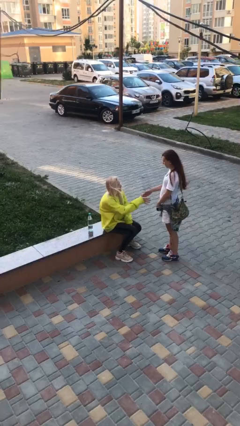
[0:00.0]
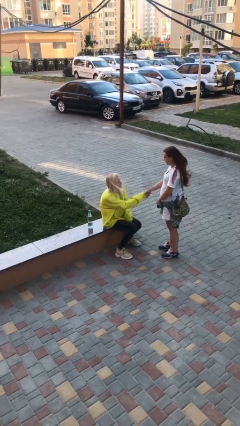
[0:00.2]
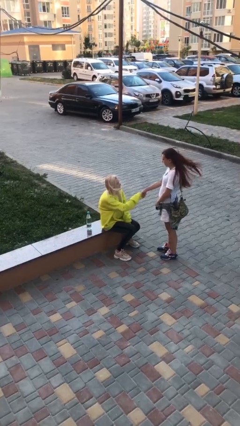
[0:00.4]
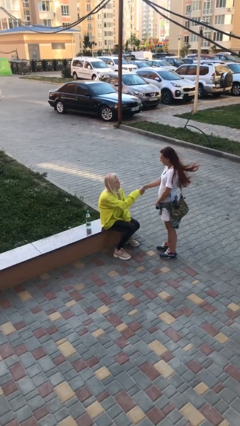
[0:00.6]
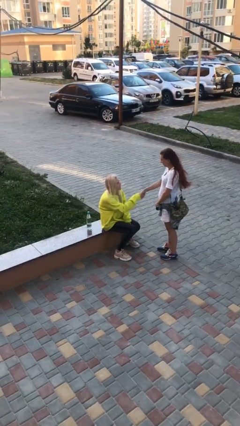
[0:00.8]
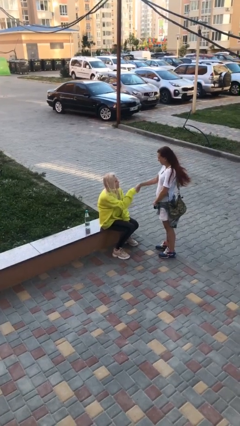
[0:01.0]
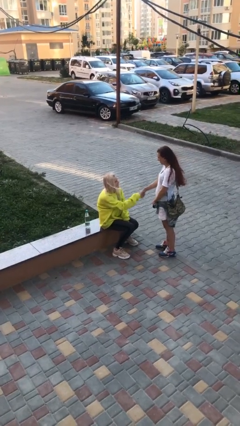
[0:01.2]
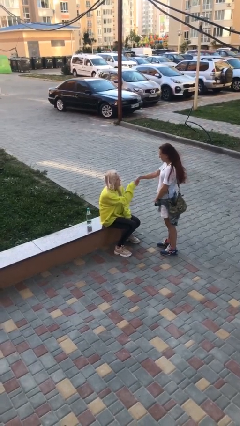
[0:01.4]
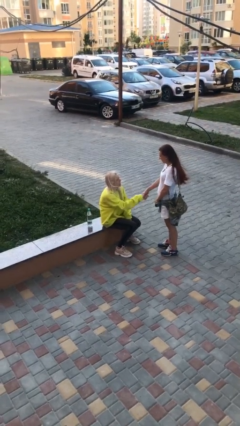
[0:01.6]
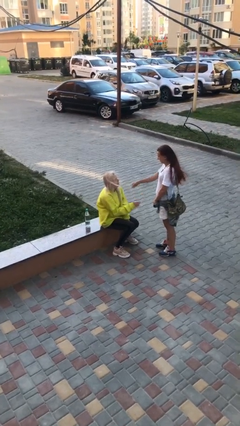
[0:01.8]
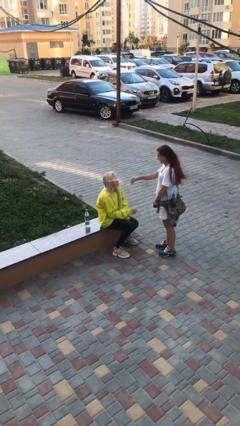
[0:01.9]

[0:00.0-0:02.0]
person shakes hand

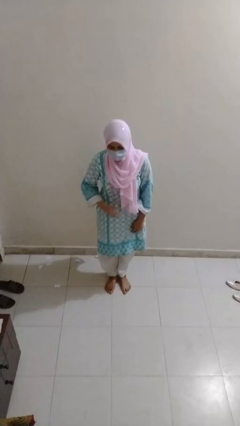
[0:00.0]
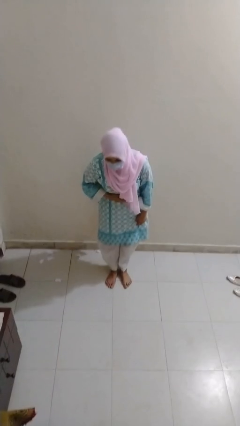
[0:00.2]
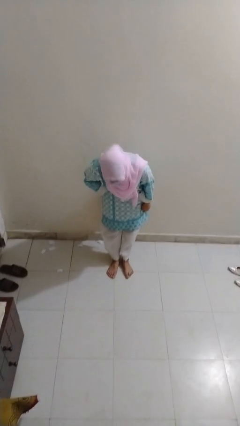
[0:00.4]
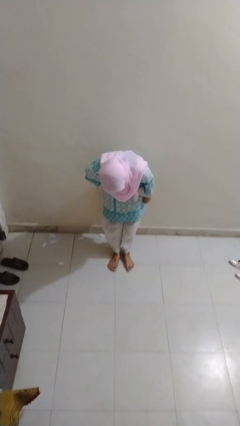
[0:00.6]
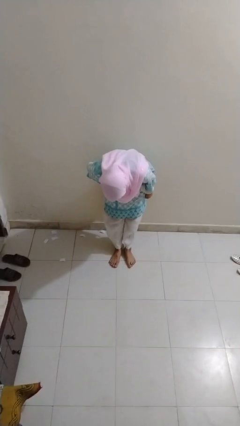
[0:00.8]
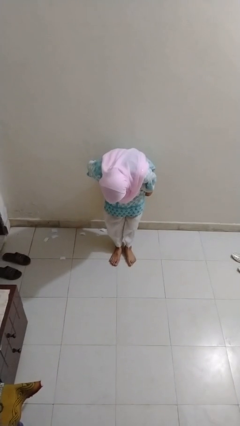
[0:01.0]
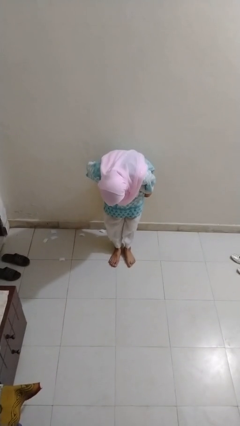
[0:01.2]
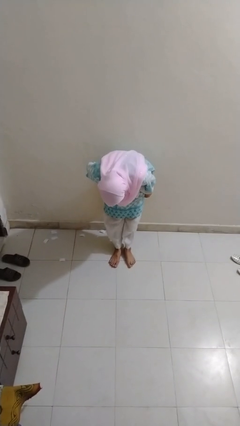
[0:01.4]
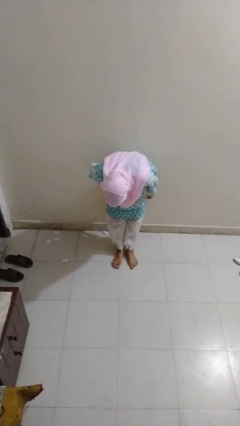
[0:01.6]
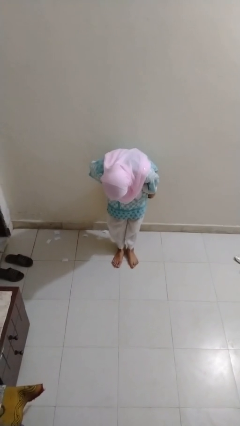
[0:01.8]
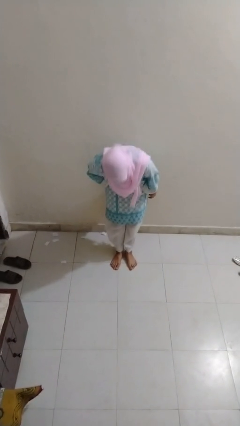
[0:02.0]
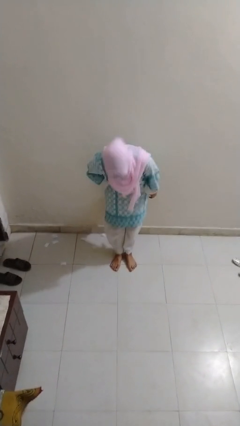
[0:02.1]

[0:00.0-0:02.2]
person bows

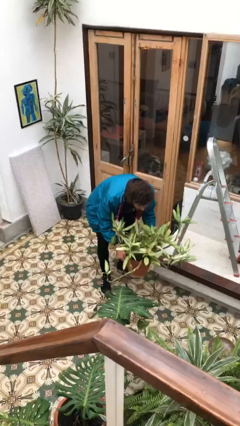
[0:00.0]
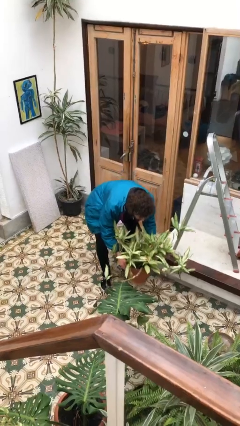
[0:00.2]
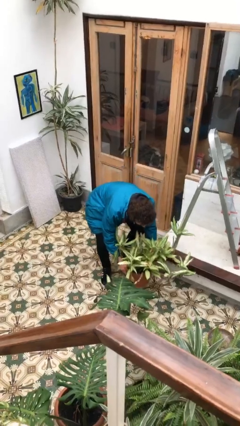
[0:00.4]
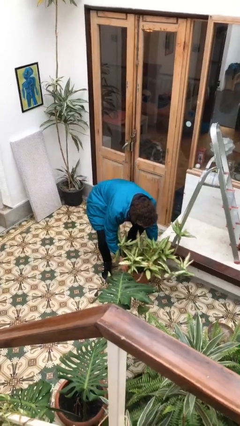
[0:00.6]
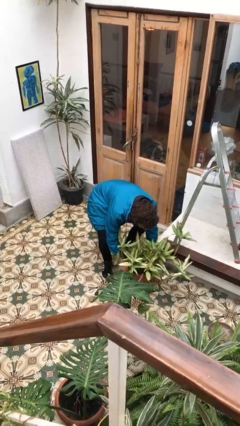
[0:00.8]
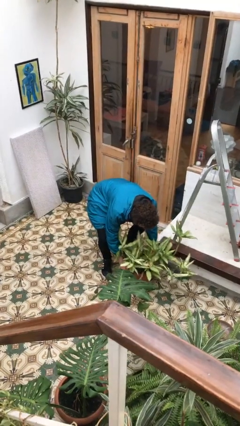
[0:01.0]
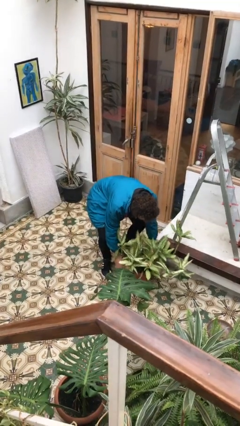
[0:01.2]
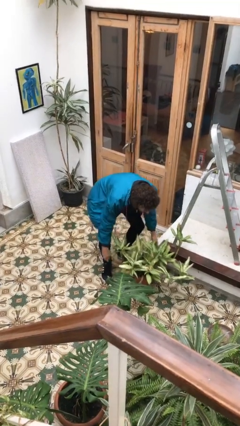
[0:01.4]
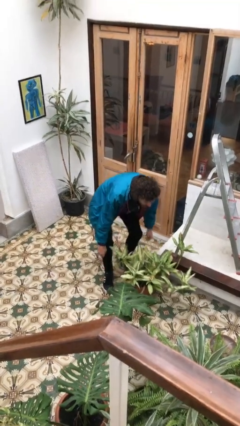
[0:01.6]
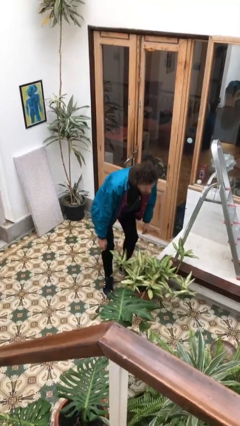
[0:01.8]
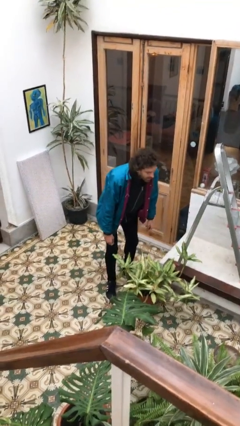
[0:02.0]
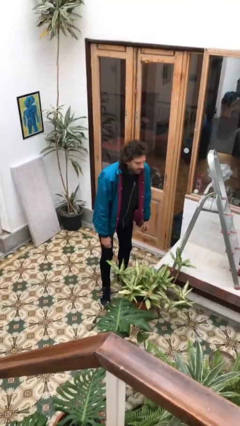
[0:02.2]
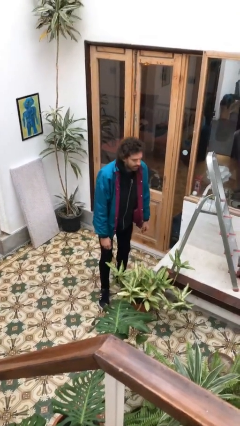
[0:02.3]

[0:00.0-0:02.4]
person puts down object on floor

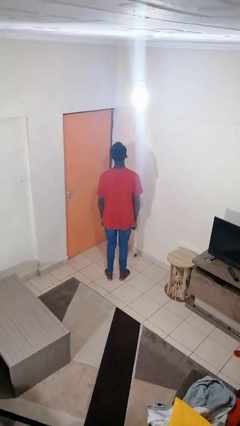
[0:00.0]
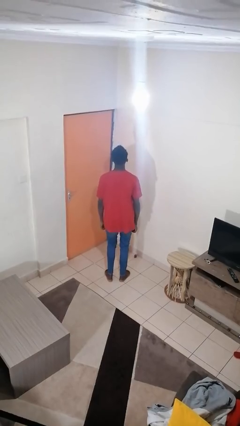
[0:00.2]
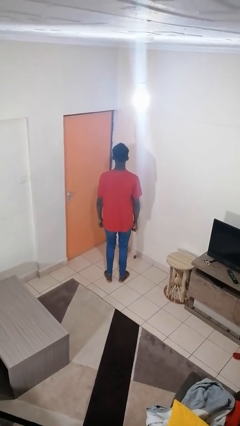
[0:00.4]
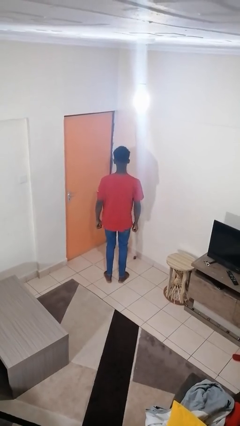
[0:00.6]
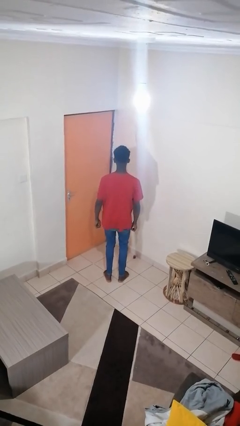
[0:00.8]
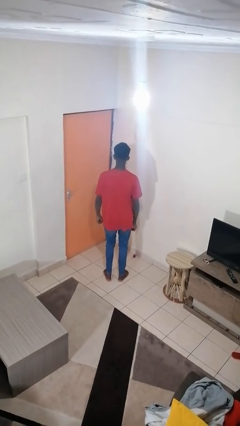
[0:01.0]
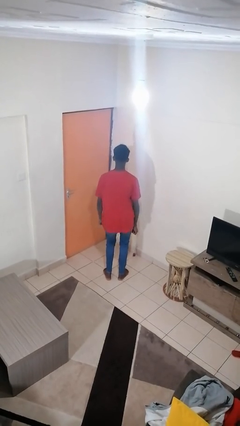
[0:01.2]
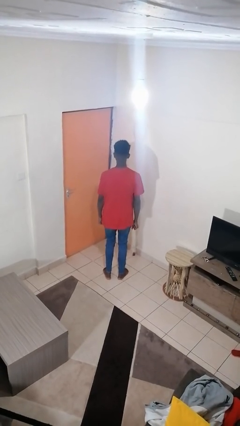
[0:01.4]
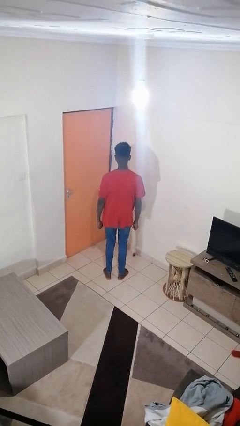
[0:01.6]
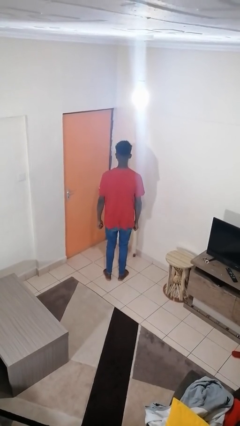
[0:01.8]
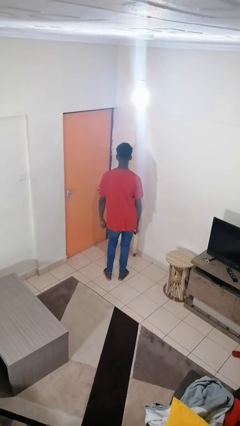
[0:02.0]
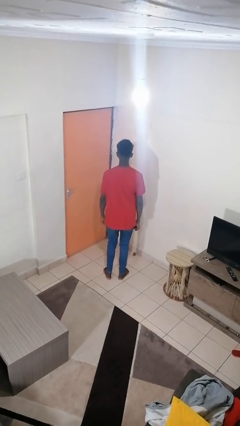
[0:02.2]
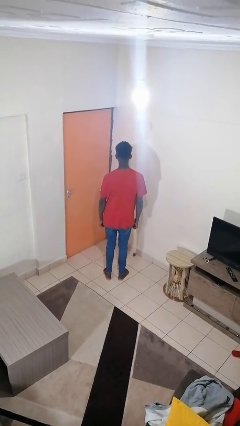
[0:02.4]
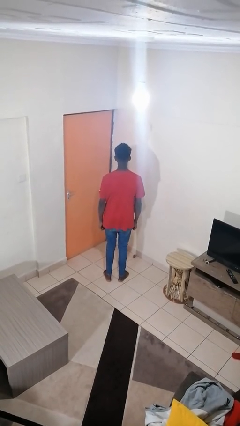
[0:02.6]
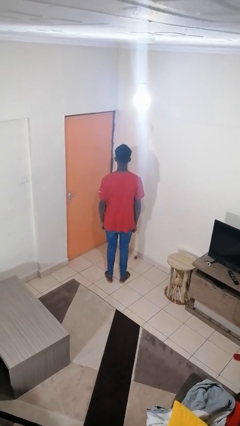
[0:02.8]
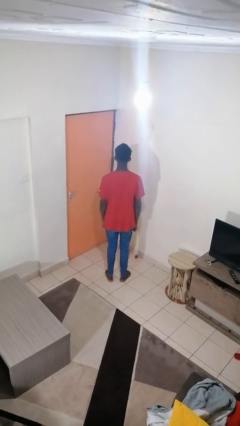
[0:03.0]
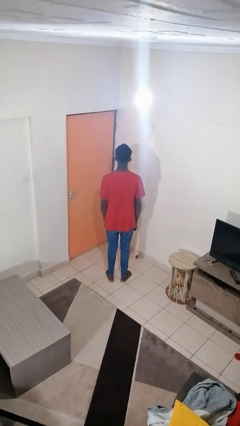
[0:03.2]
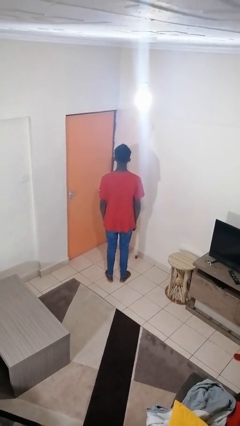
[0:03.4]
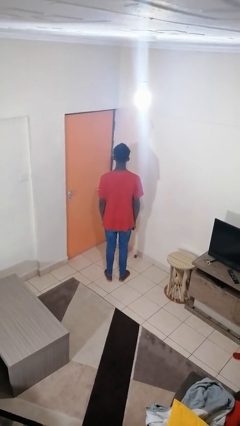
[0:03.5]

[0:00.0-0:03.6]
person wiggles hips

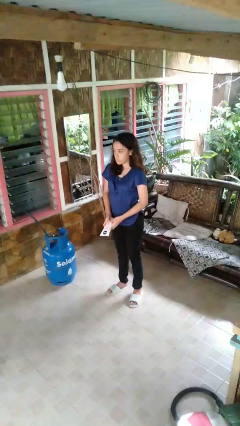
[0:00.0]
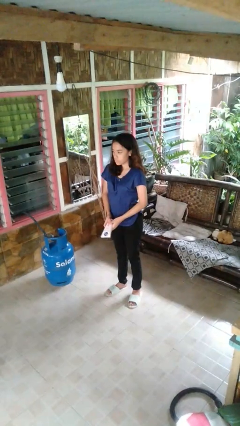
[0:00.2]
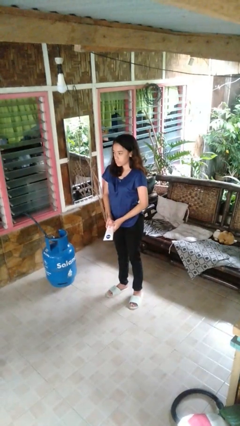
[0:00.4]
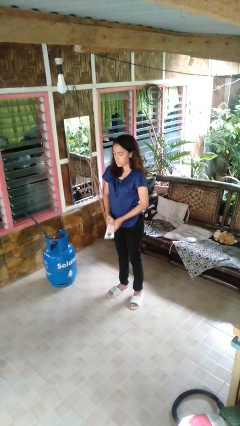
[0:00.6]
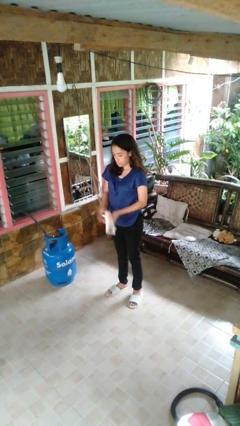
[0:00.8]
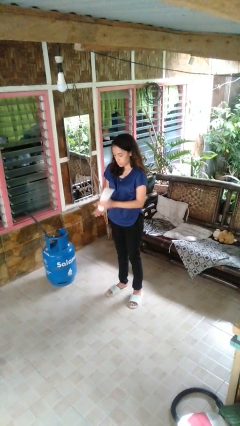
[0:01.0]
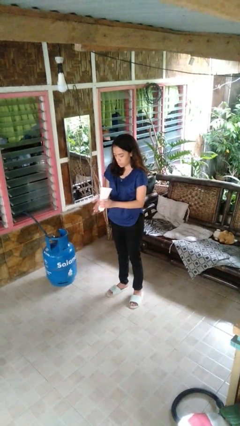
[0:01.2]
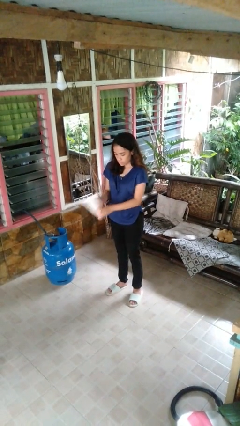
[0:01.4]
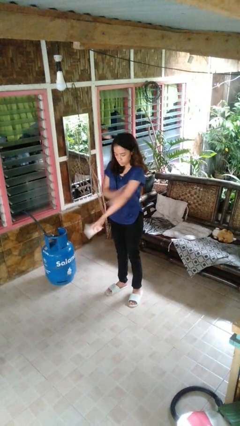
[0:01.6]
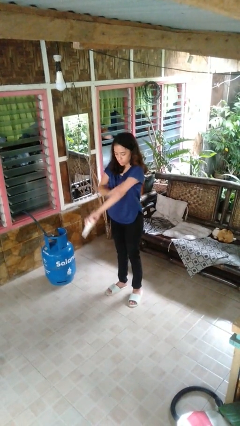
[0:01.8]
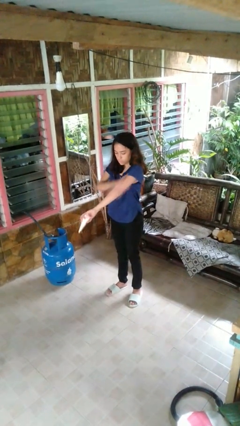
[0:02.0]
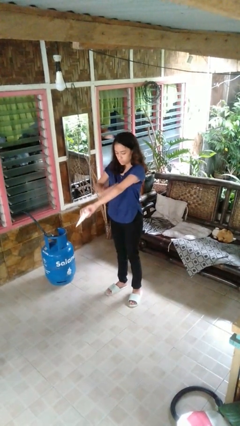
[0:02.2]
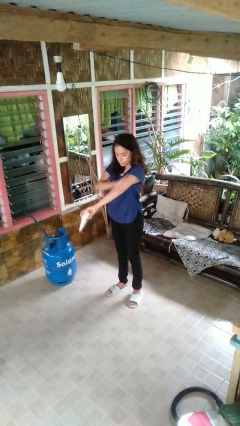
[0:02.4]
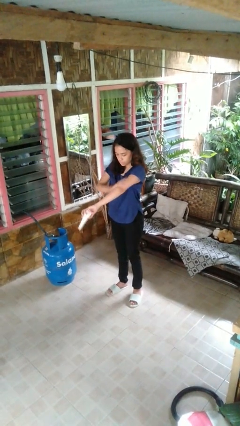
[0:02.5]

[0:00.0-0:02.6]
person applies sunscreen

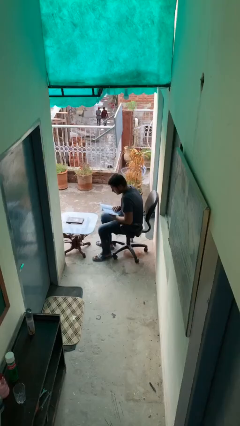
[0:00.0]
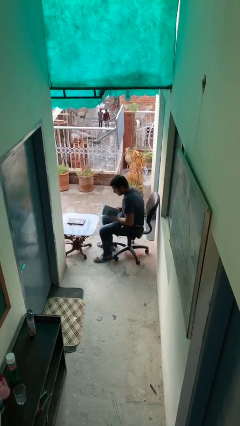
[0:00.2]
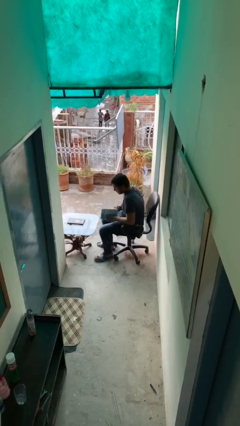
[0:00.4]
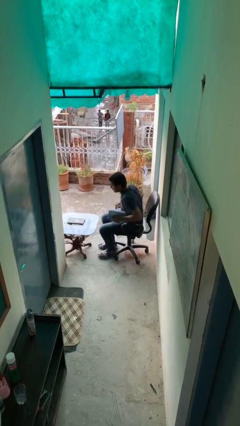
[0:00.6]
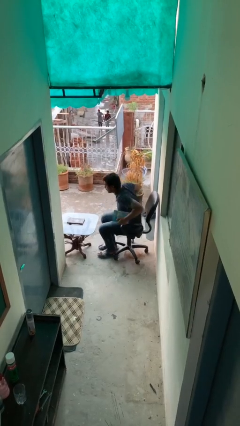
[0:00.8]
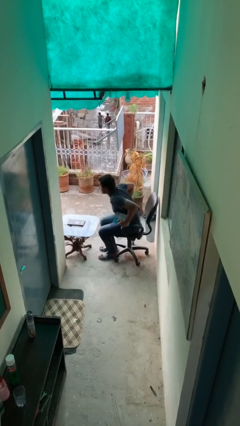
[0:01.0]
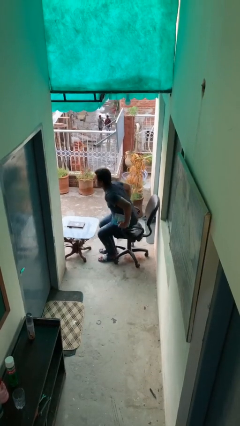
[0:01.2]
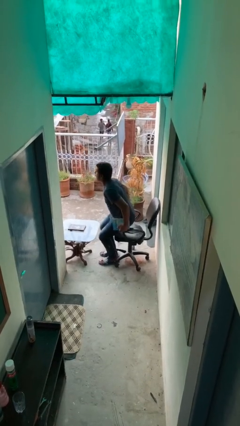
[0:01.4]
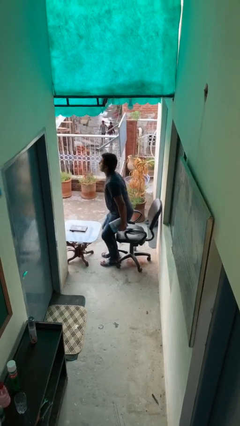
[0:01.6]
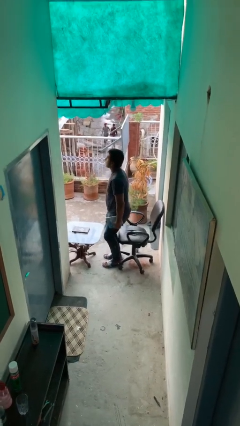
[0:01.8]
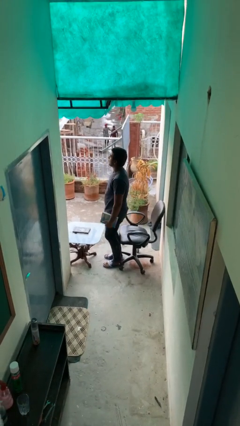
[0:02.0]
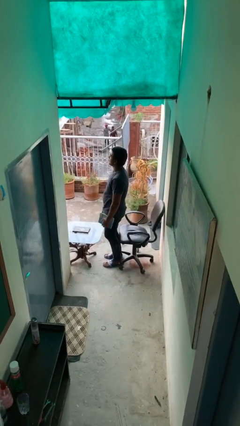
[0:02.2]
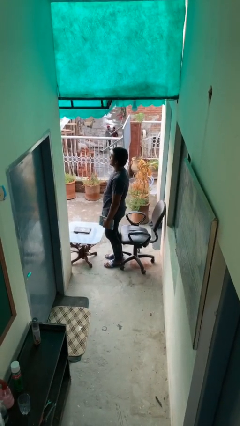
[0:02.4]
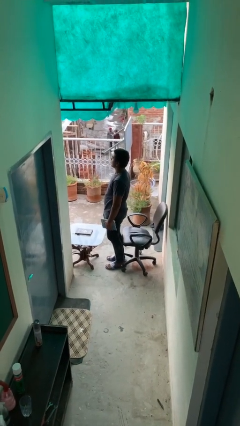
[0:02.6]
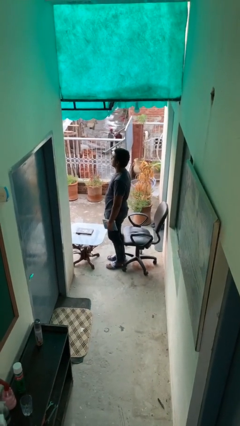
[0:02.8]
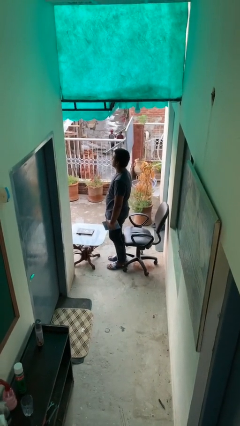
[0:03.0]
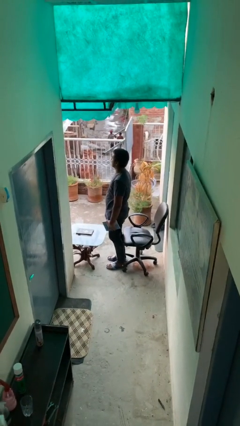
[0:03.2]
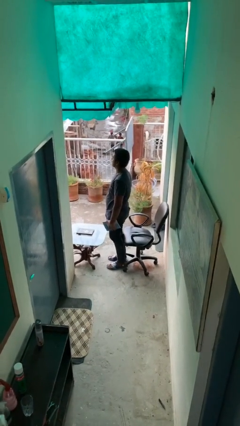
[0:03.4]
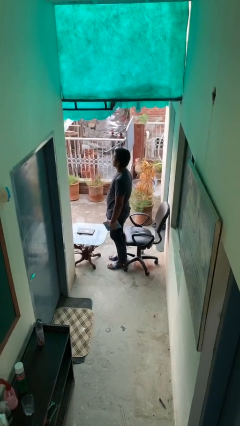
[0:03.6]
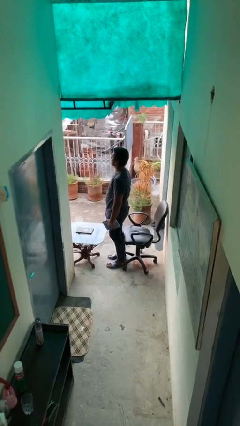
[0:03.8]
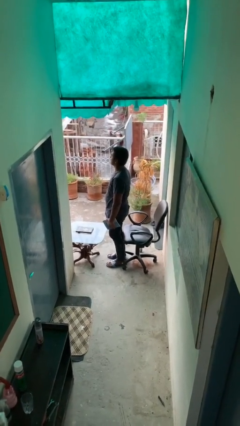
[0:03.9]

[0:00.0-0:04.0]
person stands up

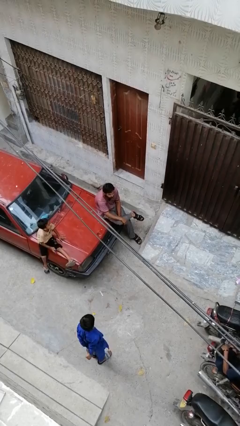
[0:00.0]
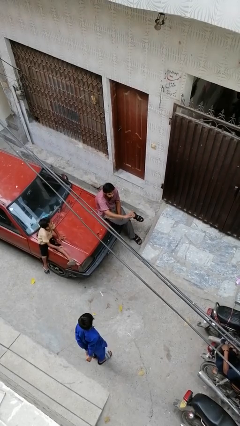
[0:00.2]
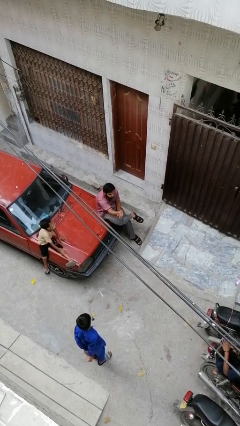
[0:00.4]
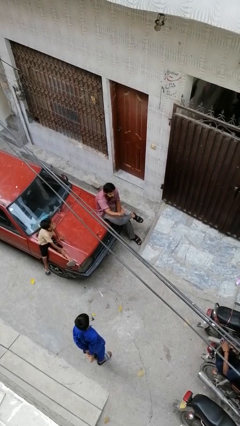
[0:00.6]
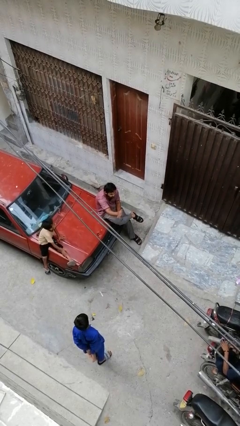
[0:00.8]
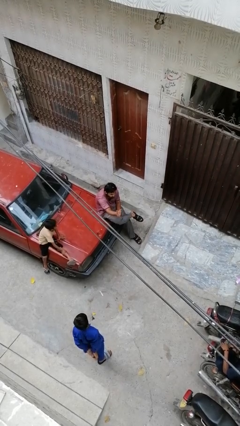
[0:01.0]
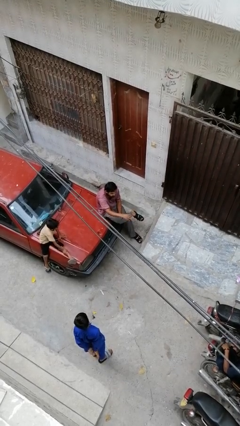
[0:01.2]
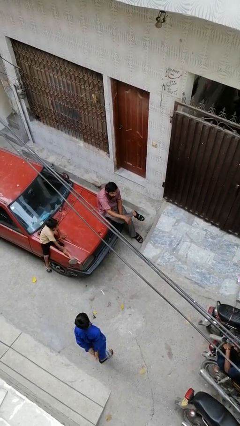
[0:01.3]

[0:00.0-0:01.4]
person waves at person
